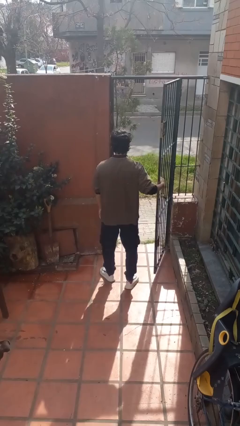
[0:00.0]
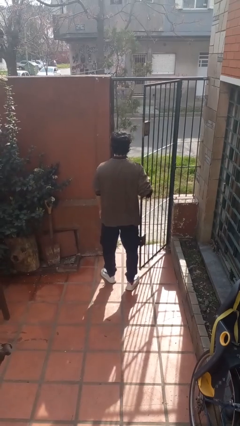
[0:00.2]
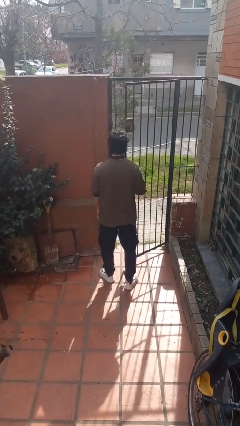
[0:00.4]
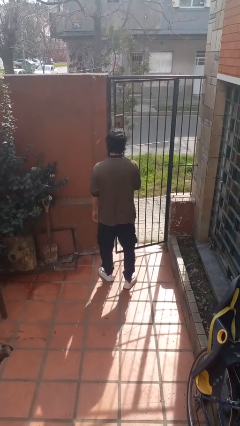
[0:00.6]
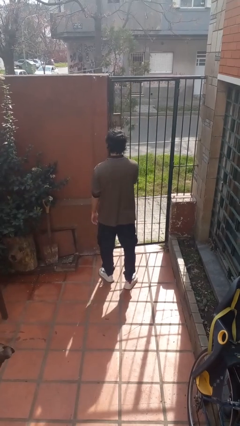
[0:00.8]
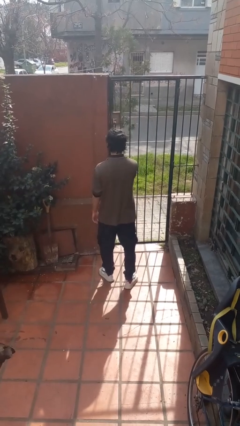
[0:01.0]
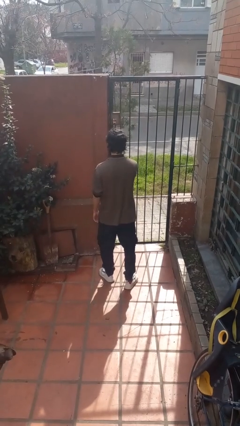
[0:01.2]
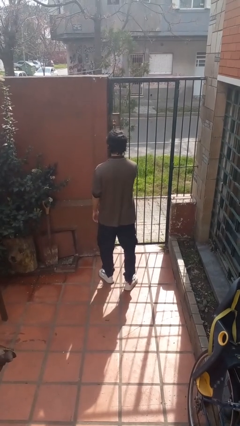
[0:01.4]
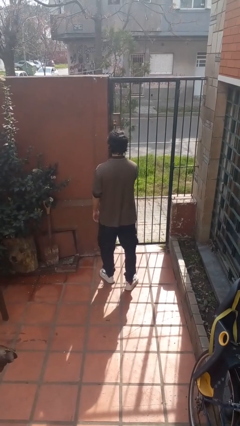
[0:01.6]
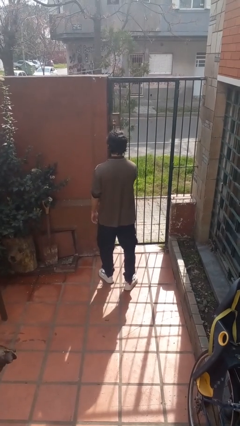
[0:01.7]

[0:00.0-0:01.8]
person closes gate

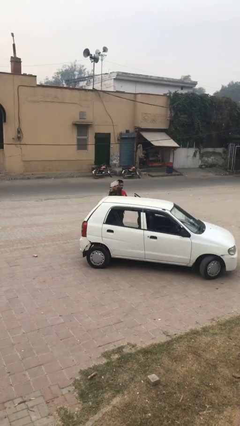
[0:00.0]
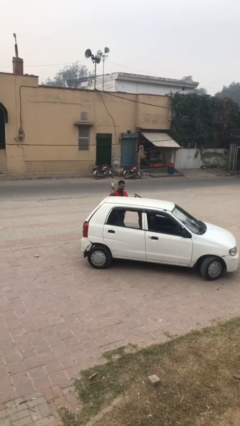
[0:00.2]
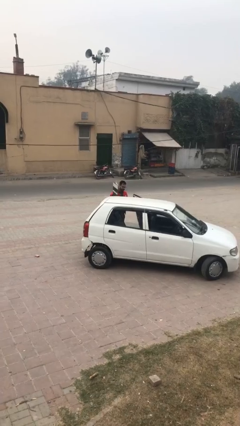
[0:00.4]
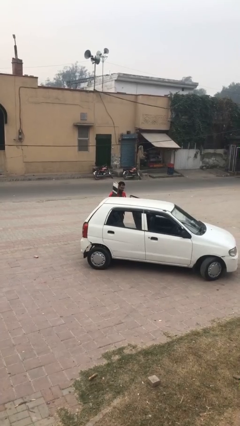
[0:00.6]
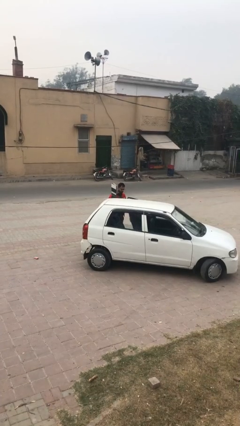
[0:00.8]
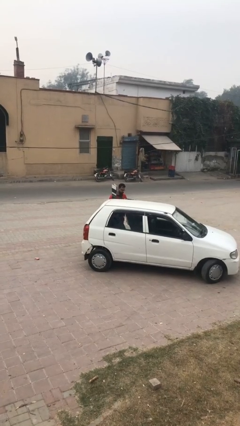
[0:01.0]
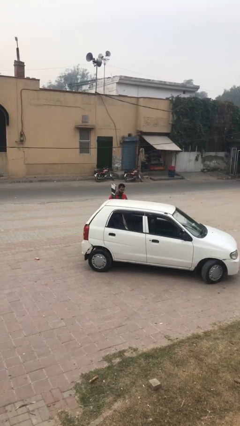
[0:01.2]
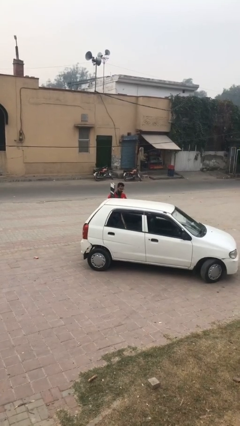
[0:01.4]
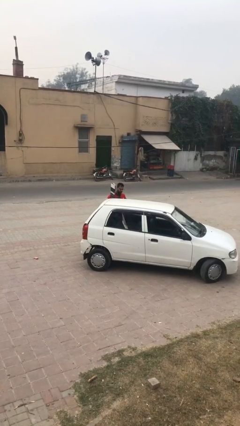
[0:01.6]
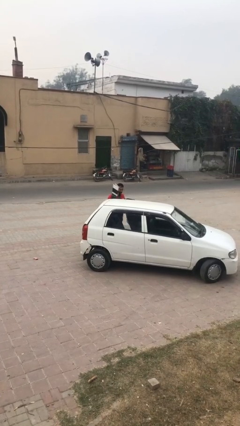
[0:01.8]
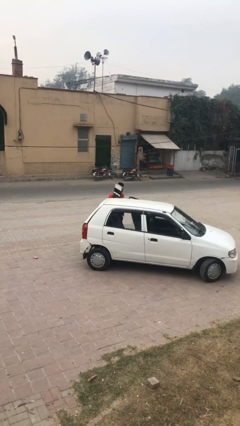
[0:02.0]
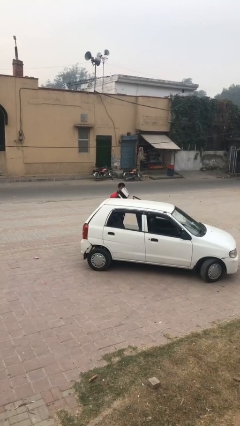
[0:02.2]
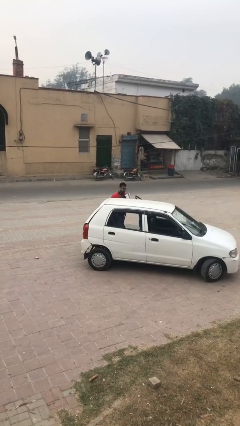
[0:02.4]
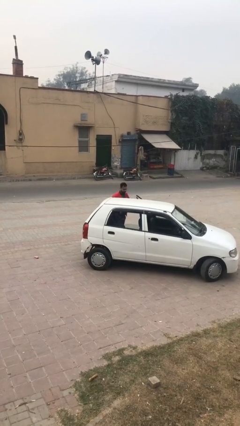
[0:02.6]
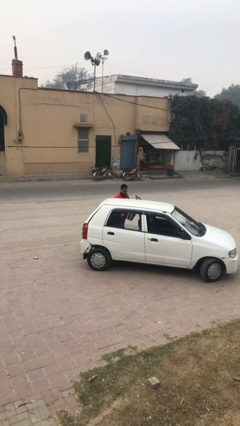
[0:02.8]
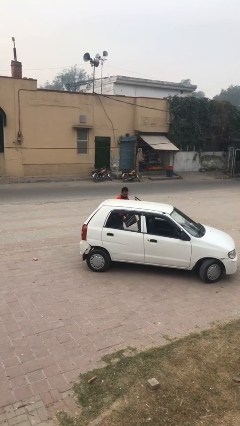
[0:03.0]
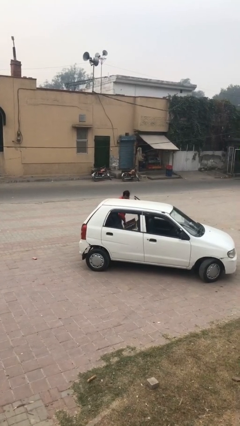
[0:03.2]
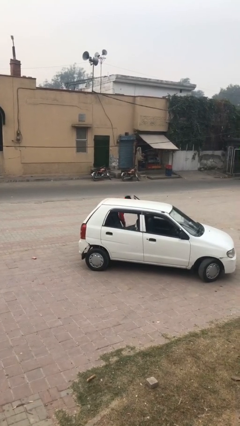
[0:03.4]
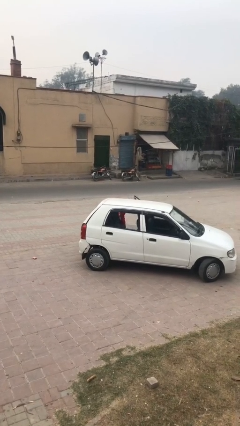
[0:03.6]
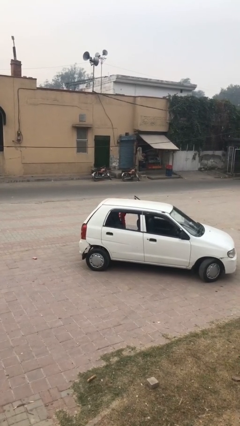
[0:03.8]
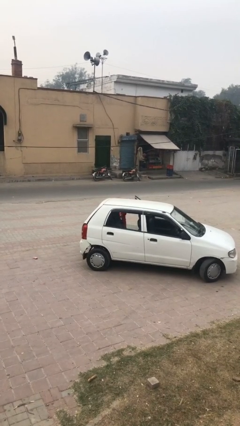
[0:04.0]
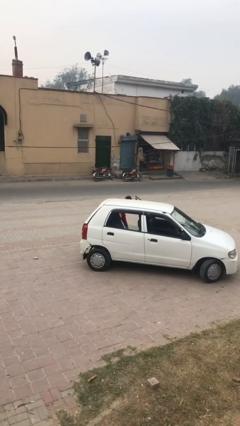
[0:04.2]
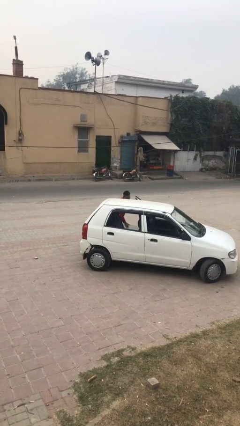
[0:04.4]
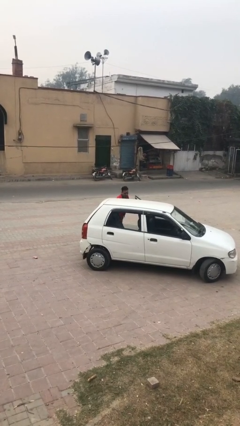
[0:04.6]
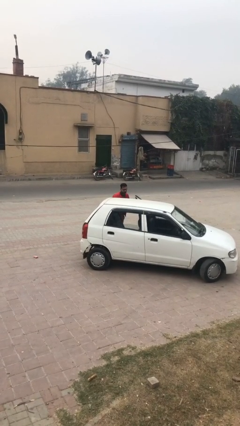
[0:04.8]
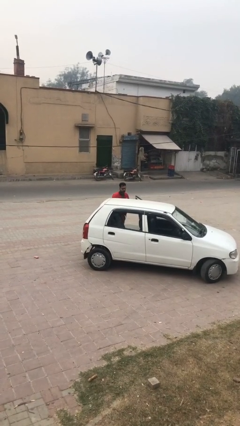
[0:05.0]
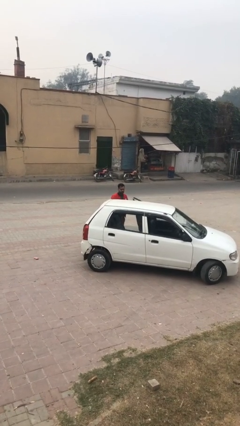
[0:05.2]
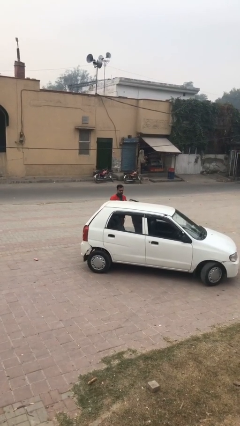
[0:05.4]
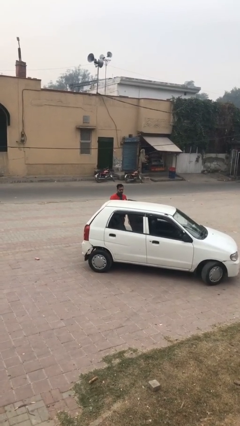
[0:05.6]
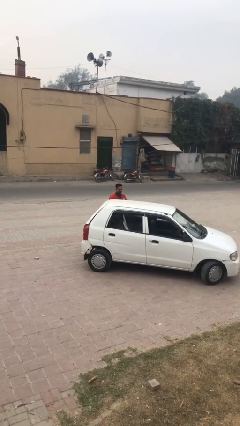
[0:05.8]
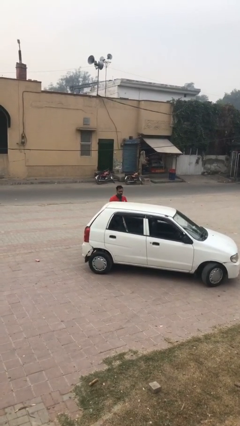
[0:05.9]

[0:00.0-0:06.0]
person loads car

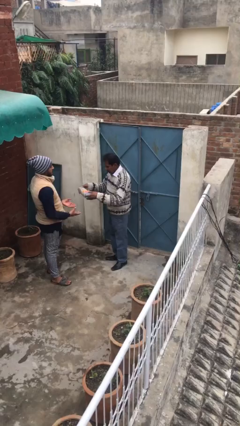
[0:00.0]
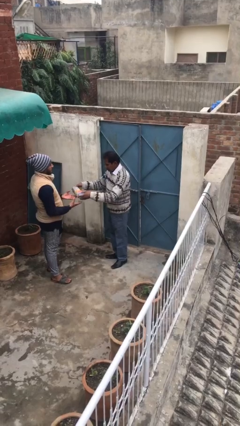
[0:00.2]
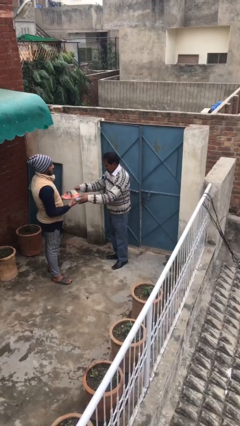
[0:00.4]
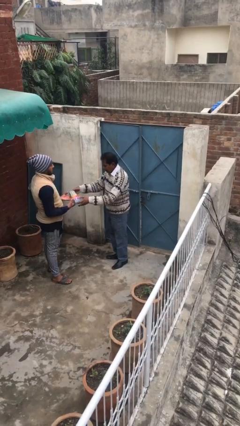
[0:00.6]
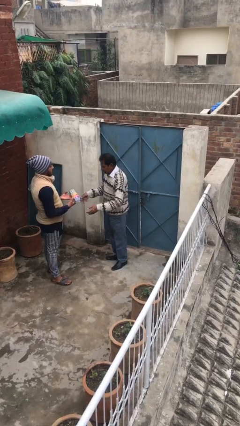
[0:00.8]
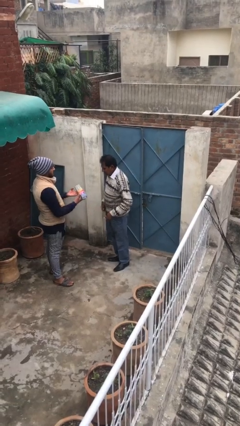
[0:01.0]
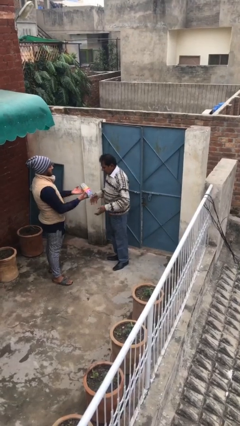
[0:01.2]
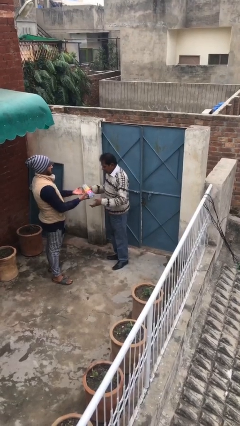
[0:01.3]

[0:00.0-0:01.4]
person transfers object to person

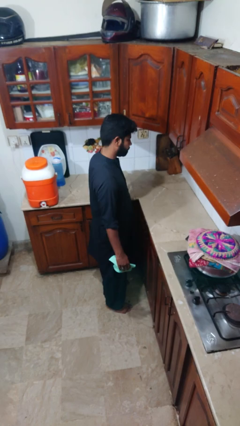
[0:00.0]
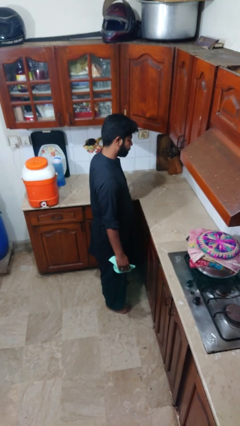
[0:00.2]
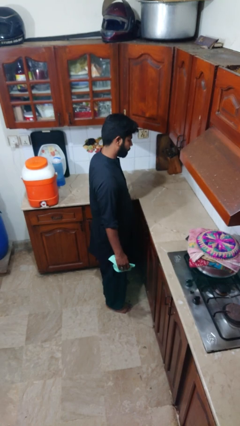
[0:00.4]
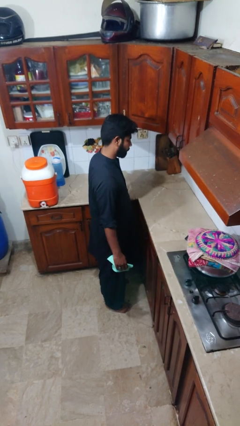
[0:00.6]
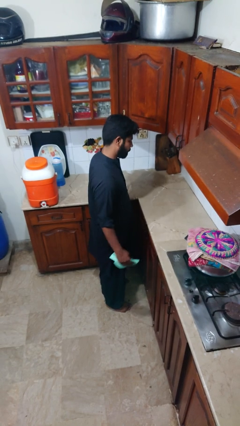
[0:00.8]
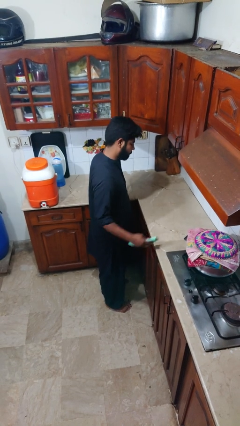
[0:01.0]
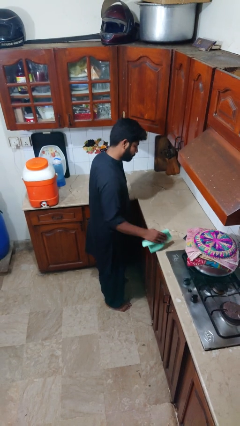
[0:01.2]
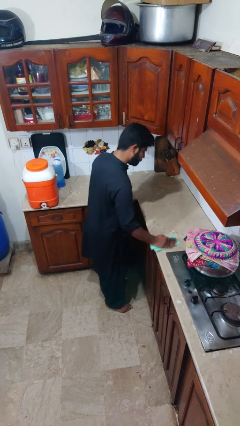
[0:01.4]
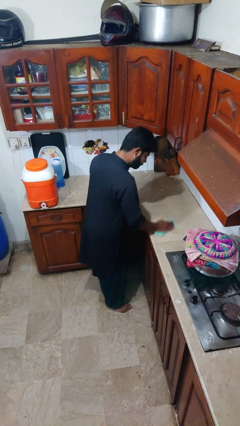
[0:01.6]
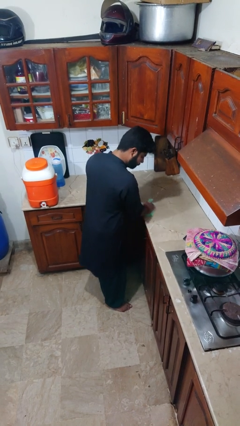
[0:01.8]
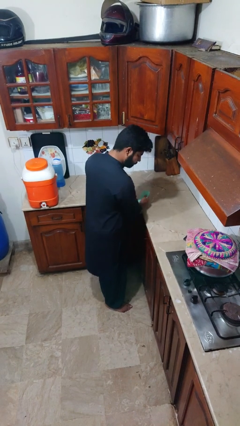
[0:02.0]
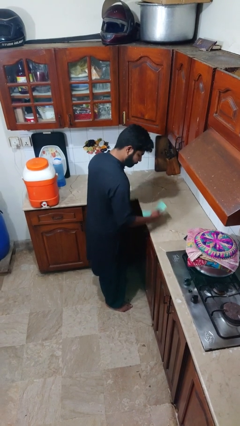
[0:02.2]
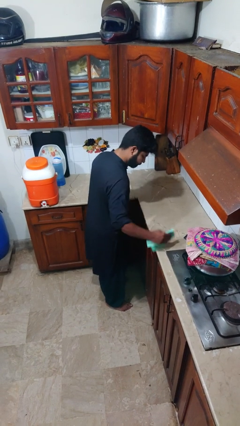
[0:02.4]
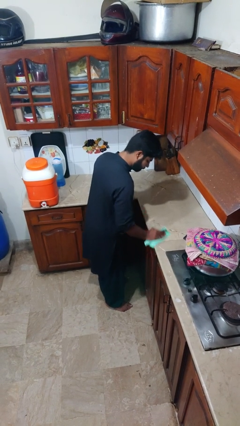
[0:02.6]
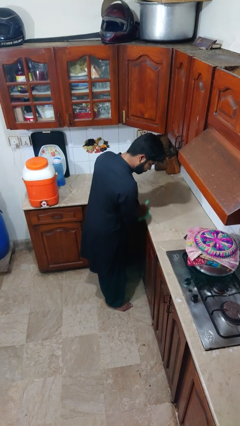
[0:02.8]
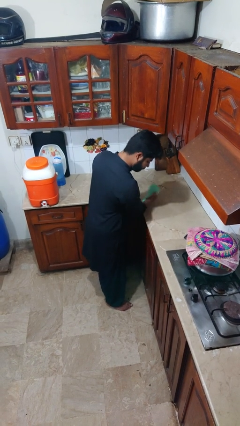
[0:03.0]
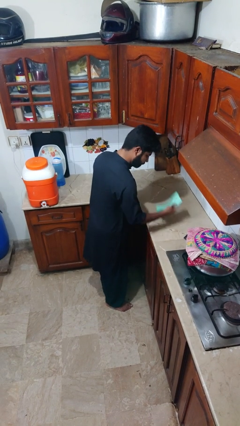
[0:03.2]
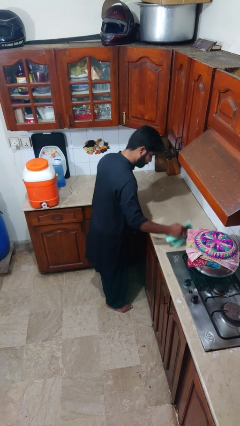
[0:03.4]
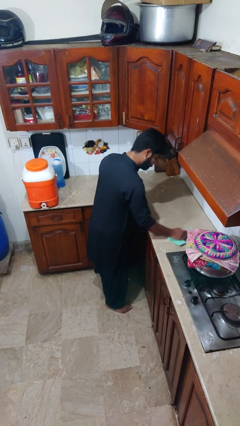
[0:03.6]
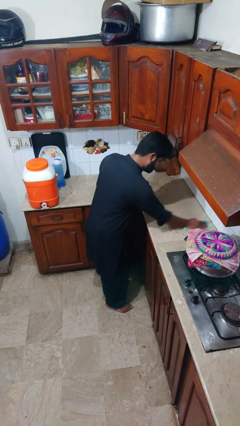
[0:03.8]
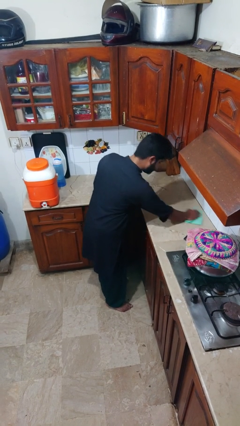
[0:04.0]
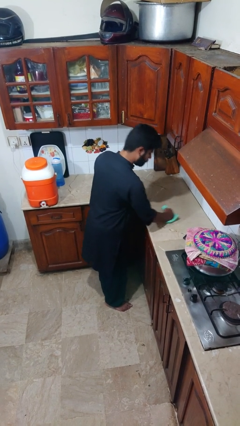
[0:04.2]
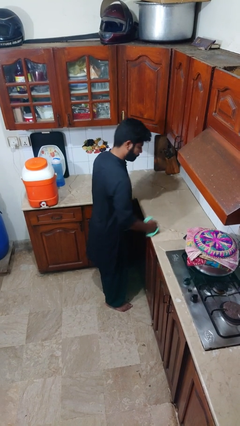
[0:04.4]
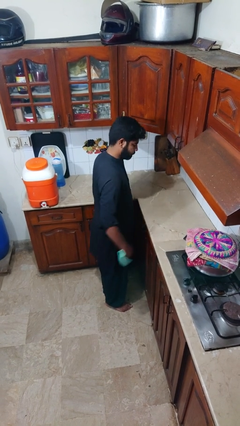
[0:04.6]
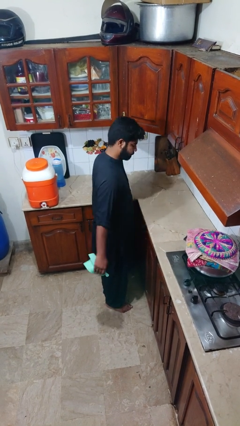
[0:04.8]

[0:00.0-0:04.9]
person cleans table with rag

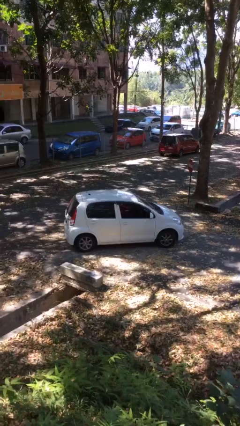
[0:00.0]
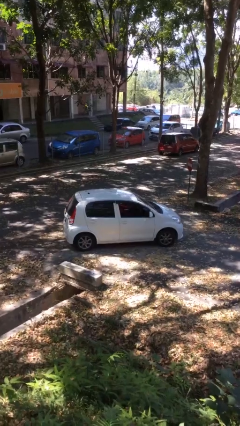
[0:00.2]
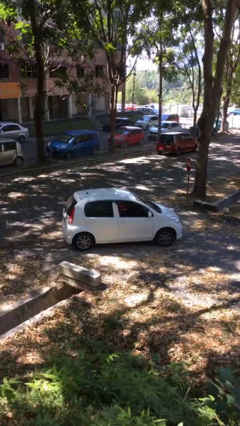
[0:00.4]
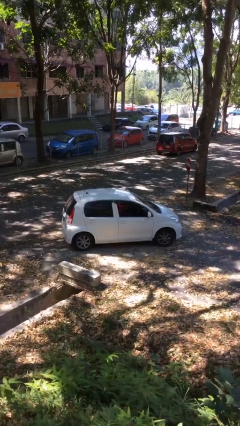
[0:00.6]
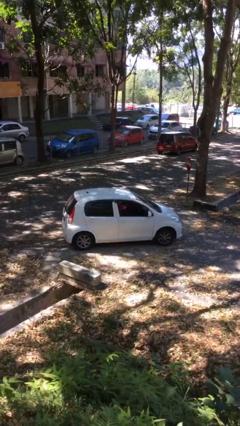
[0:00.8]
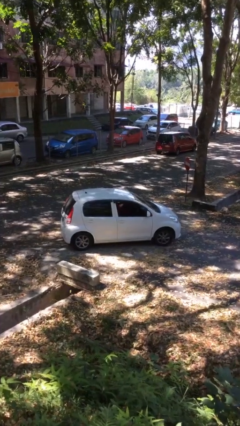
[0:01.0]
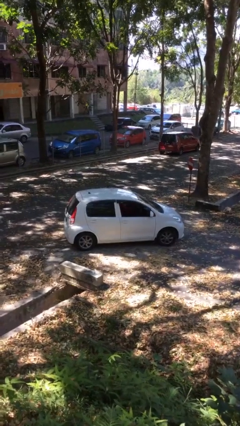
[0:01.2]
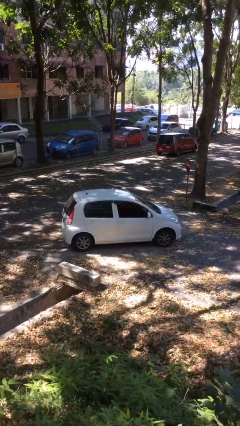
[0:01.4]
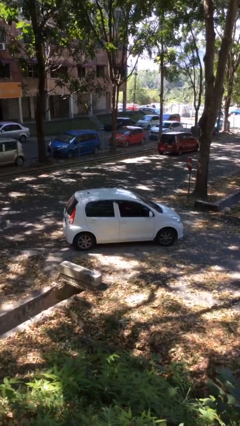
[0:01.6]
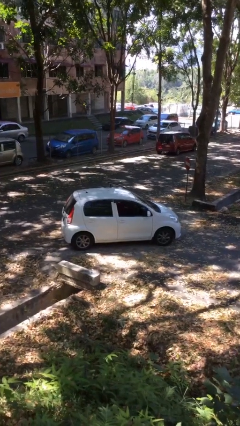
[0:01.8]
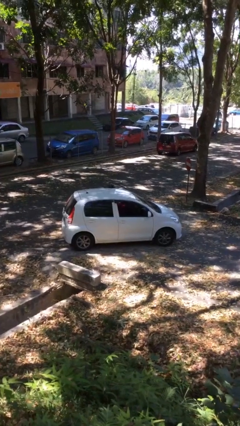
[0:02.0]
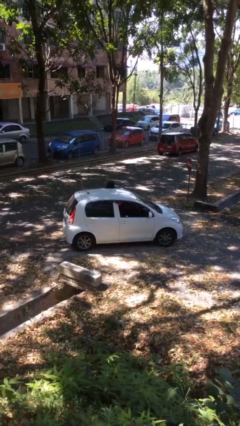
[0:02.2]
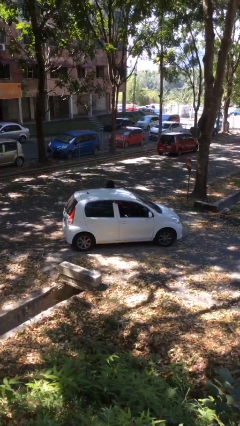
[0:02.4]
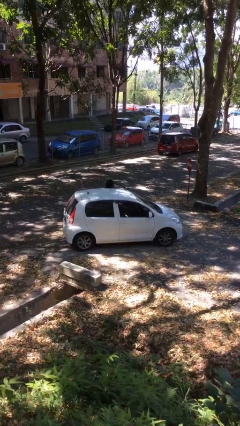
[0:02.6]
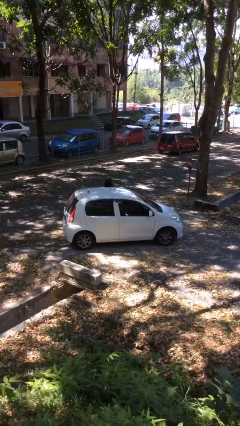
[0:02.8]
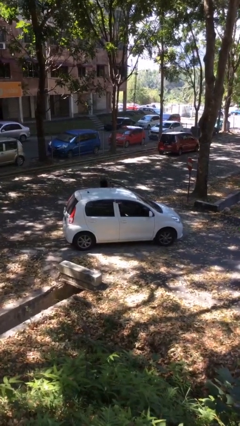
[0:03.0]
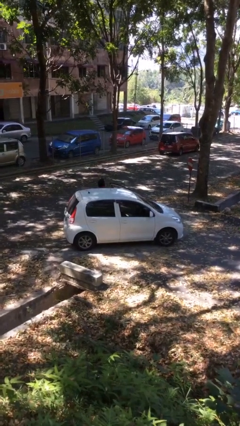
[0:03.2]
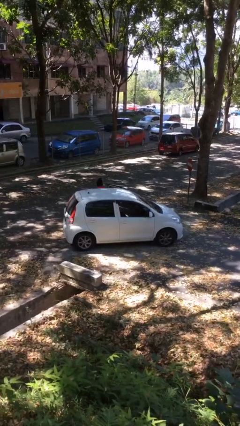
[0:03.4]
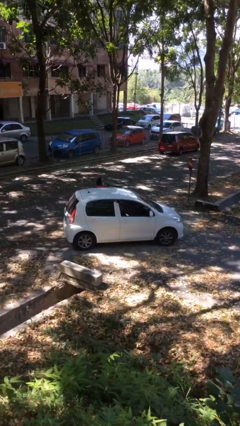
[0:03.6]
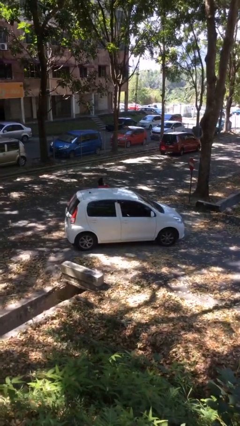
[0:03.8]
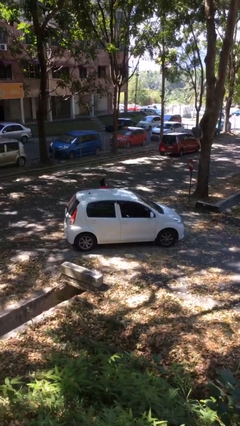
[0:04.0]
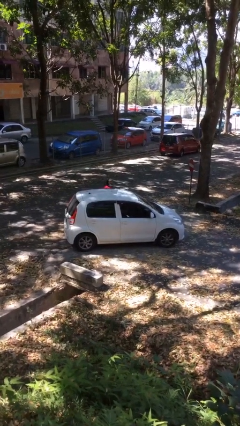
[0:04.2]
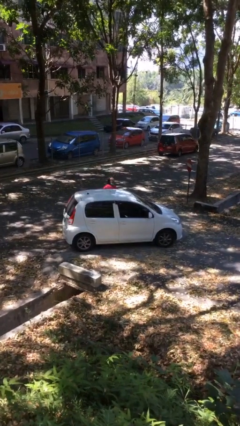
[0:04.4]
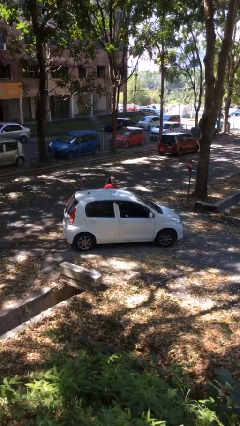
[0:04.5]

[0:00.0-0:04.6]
car drops off person
